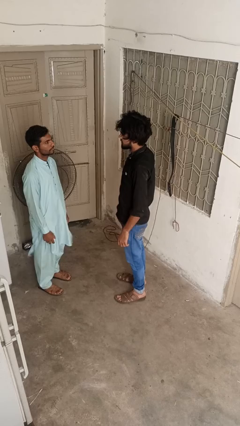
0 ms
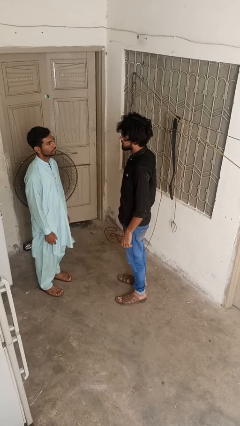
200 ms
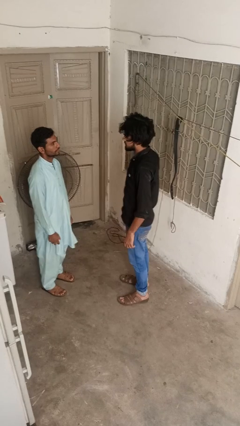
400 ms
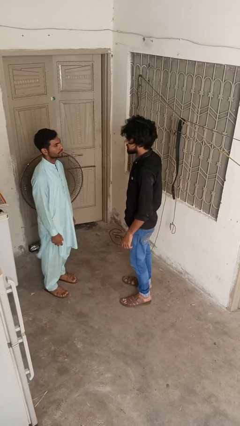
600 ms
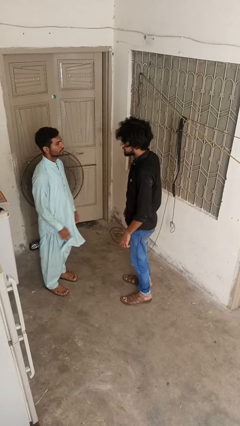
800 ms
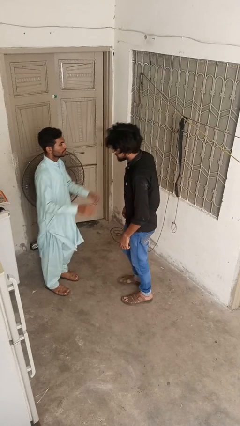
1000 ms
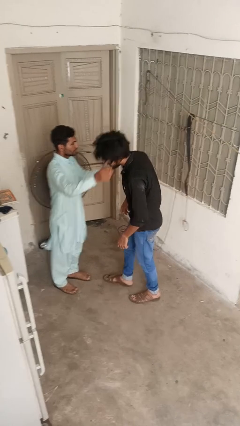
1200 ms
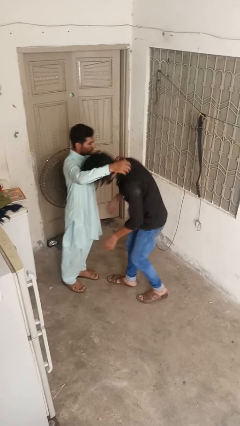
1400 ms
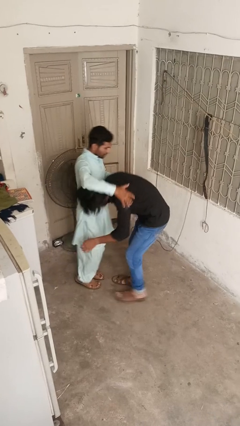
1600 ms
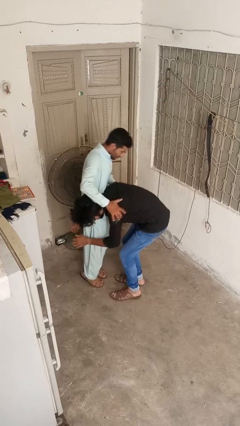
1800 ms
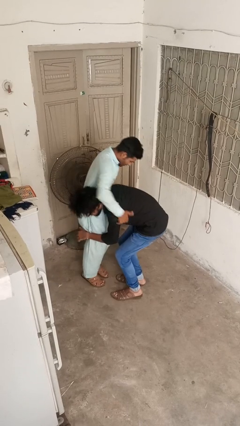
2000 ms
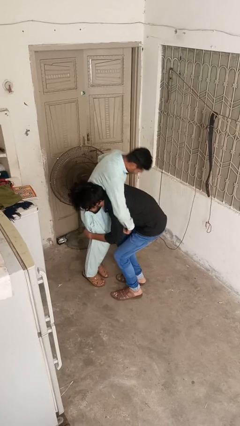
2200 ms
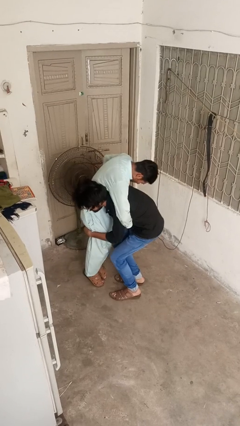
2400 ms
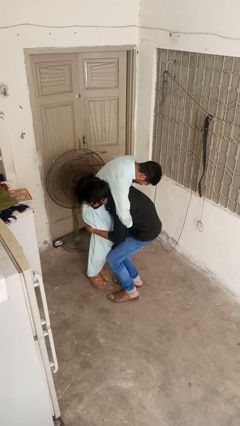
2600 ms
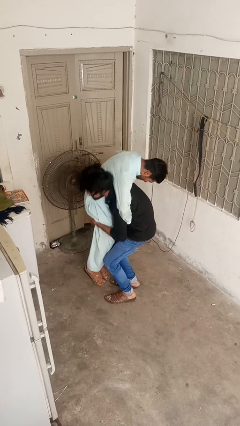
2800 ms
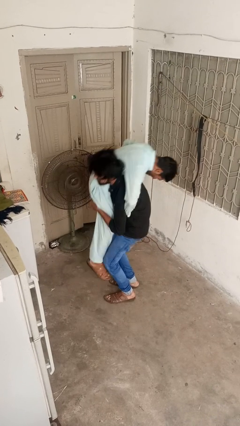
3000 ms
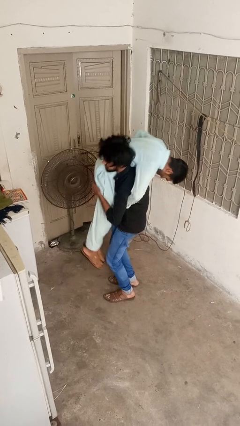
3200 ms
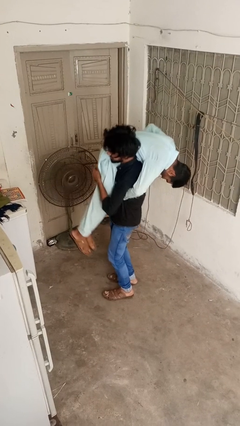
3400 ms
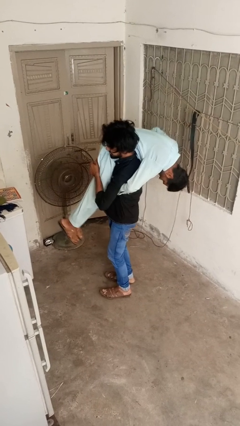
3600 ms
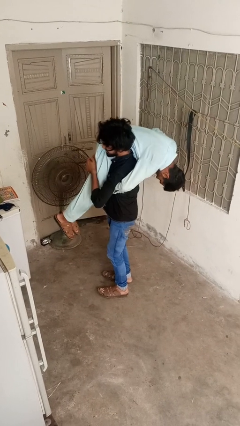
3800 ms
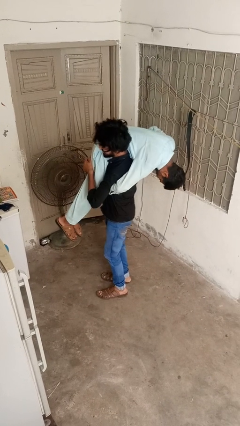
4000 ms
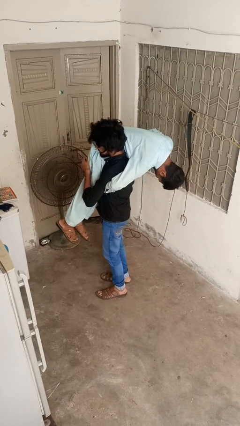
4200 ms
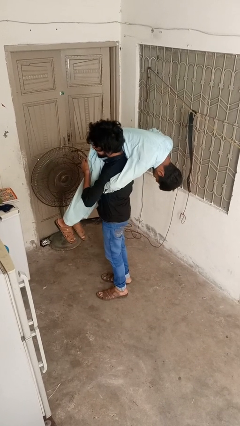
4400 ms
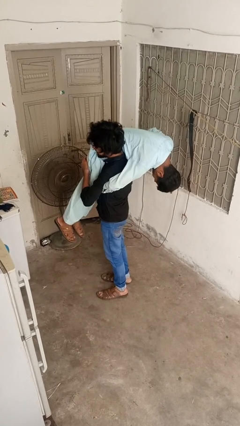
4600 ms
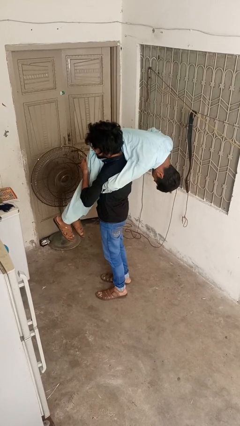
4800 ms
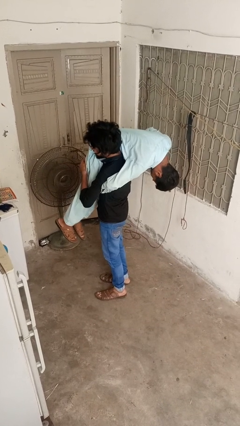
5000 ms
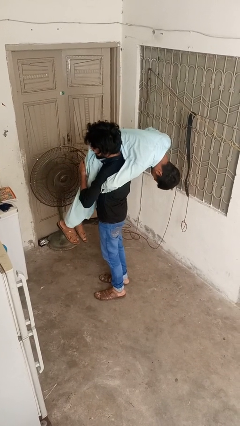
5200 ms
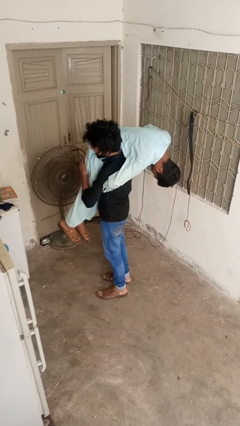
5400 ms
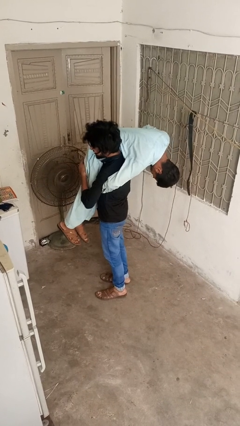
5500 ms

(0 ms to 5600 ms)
person carries person over shoulder

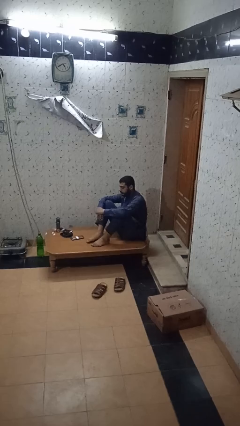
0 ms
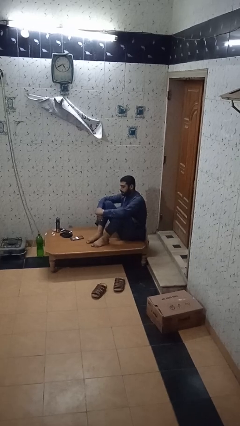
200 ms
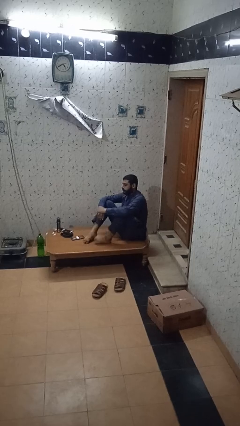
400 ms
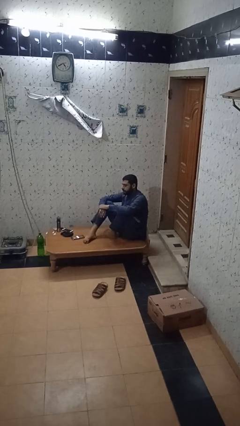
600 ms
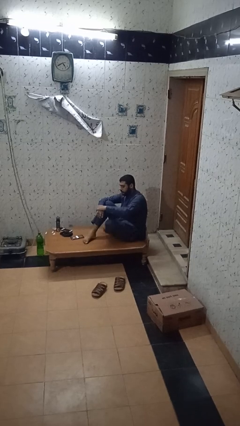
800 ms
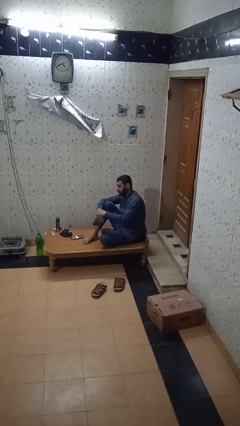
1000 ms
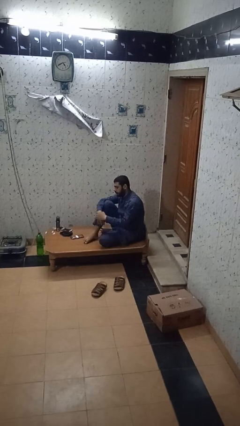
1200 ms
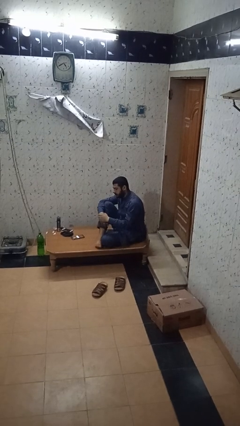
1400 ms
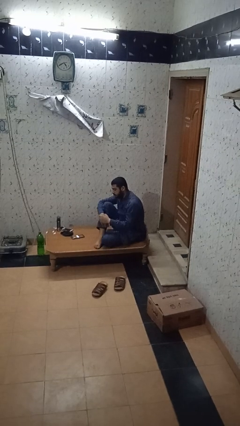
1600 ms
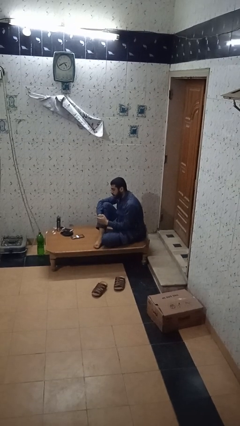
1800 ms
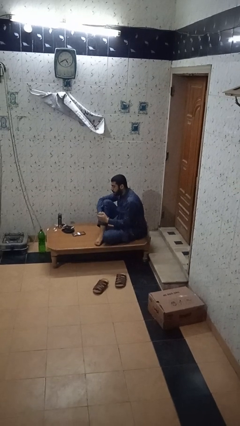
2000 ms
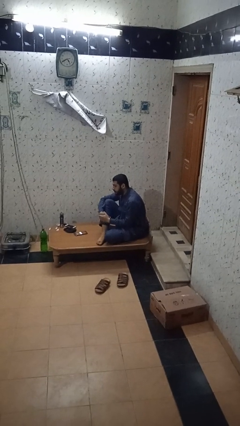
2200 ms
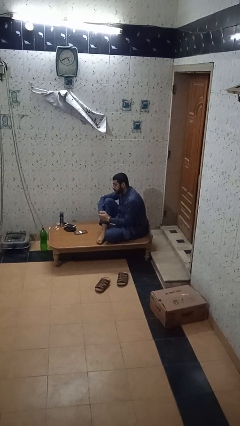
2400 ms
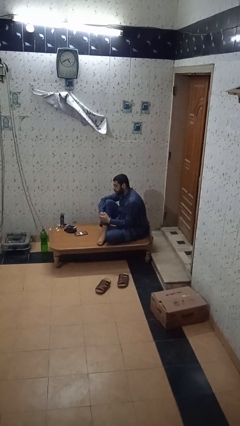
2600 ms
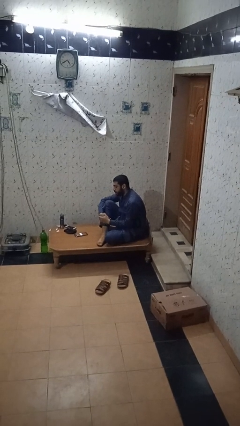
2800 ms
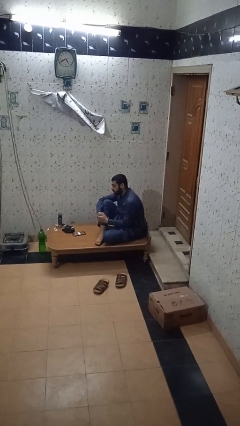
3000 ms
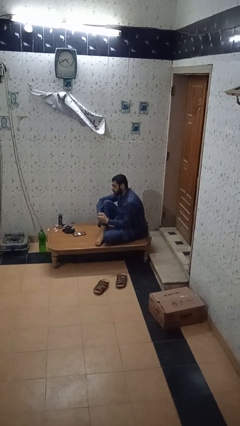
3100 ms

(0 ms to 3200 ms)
person crosses legs

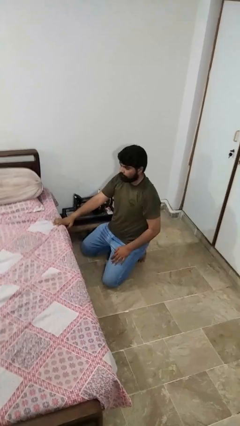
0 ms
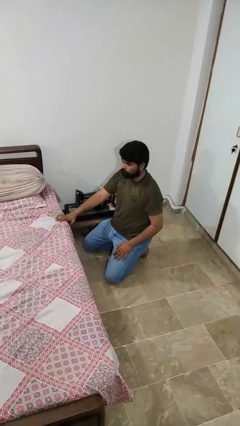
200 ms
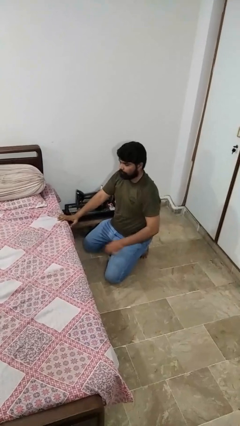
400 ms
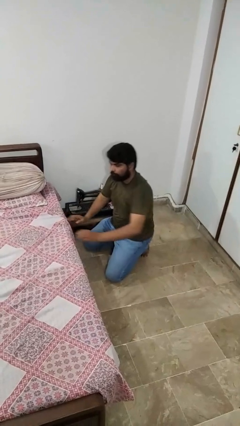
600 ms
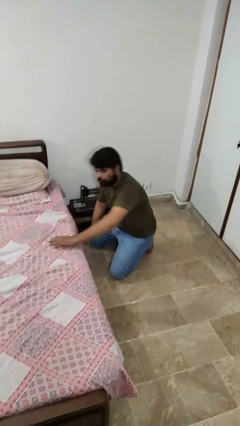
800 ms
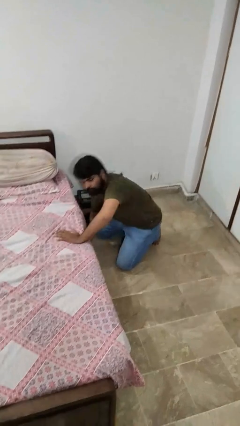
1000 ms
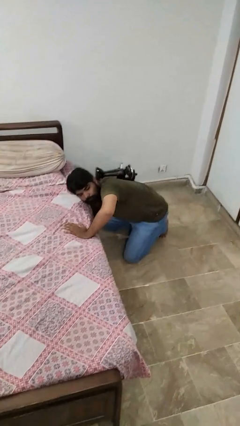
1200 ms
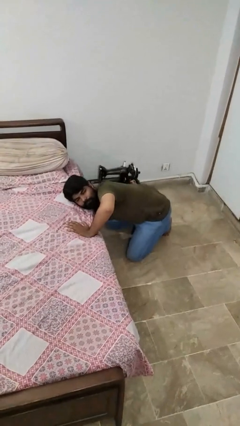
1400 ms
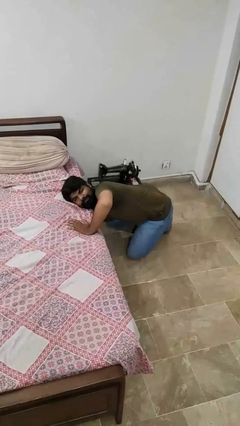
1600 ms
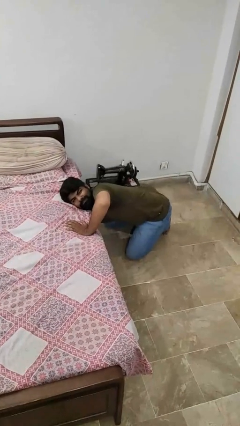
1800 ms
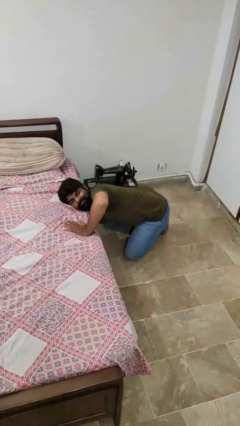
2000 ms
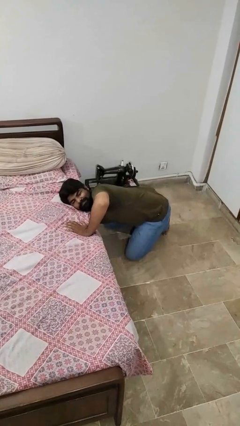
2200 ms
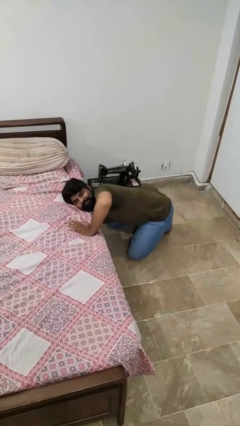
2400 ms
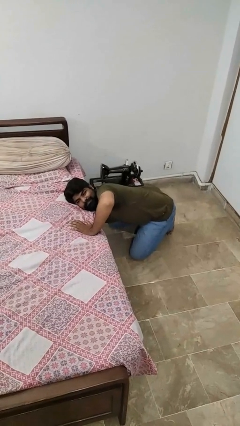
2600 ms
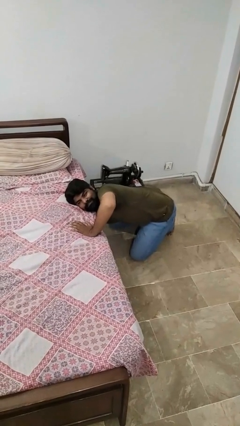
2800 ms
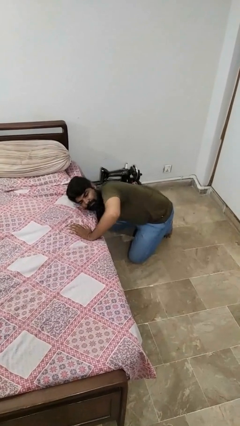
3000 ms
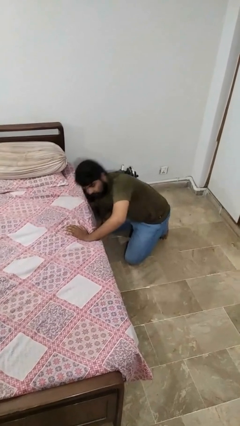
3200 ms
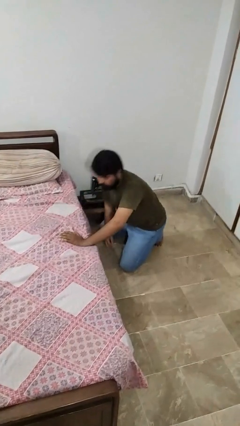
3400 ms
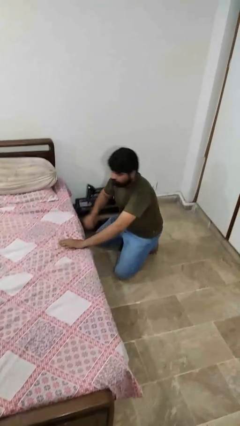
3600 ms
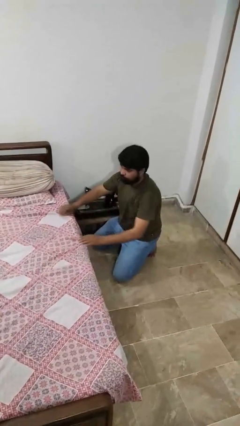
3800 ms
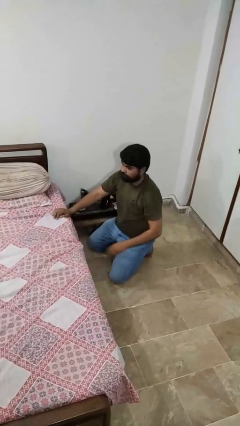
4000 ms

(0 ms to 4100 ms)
person searches under bed

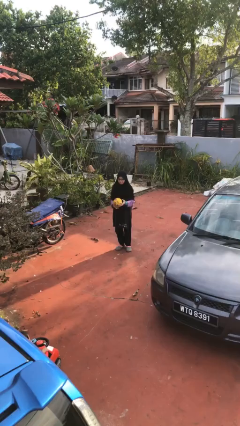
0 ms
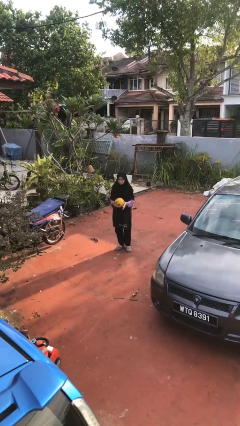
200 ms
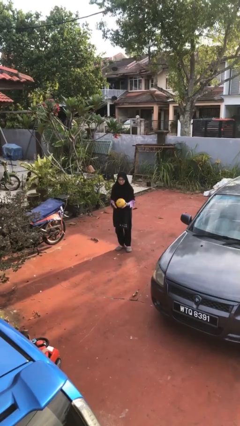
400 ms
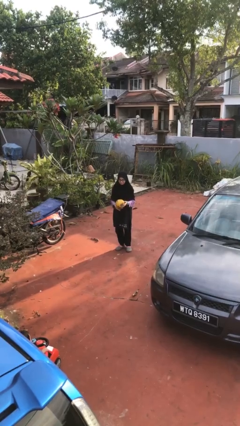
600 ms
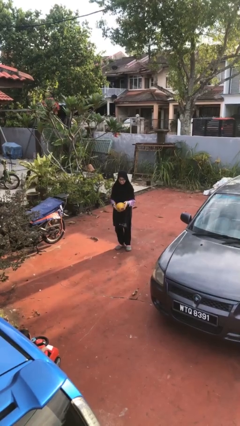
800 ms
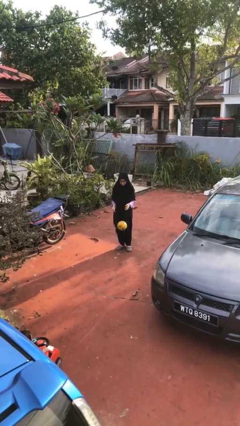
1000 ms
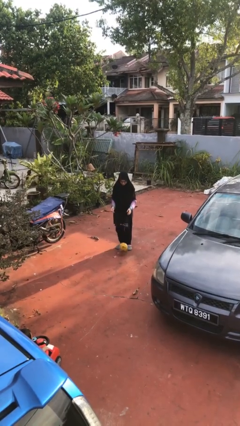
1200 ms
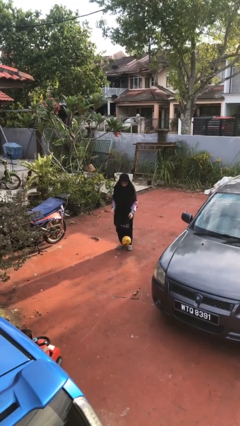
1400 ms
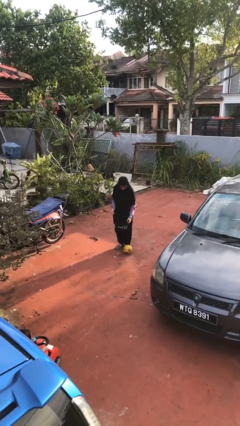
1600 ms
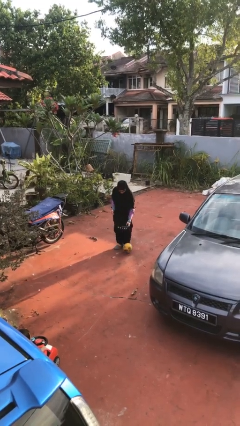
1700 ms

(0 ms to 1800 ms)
person drops object

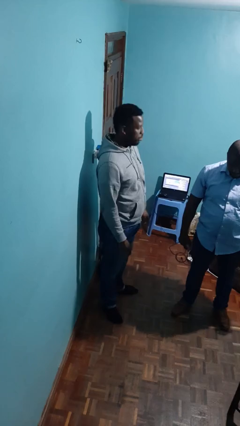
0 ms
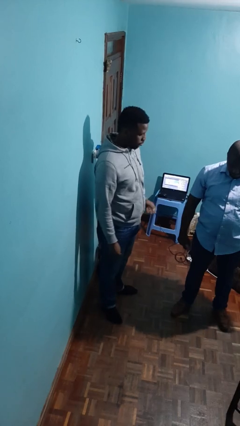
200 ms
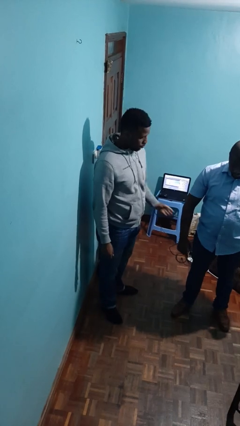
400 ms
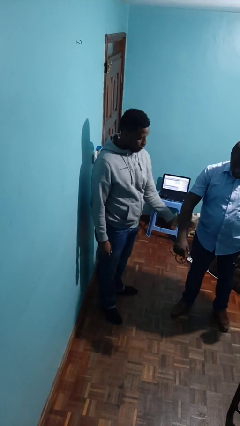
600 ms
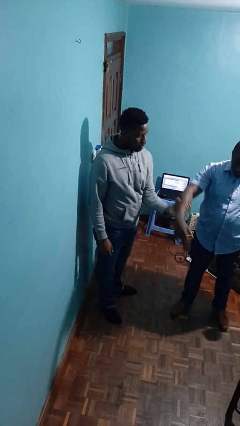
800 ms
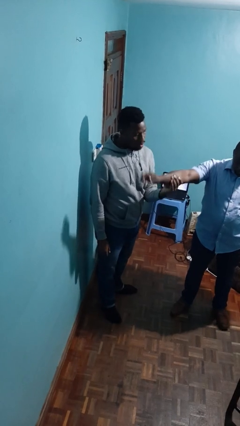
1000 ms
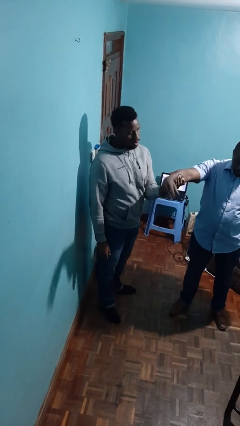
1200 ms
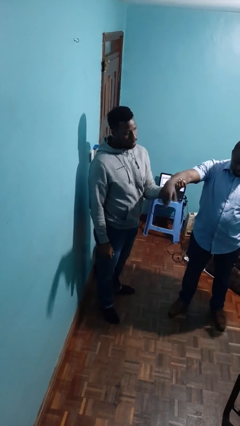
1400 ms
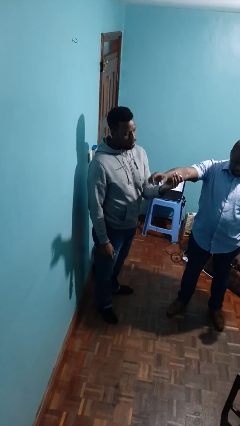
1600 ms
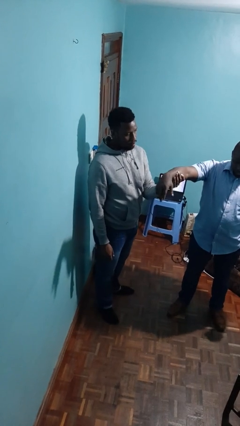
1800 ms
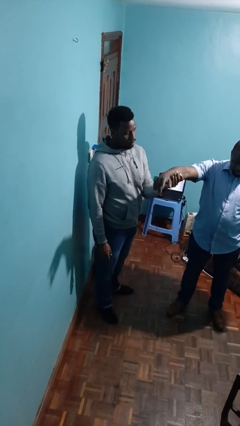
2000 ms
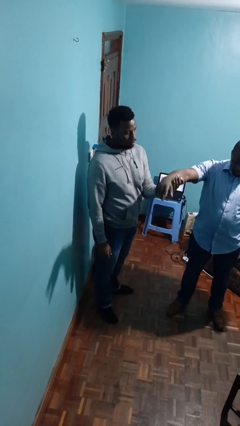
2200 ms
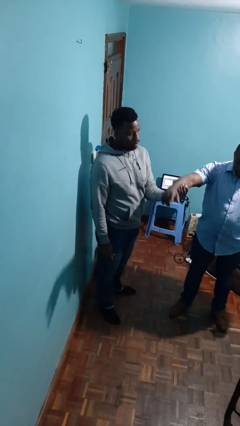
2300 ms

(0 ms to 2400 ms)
person grabs person by forearm

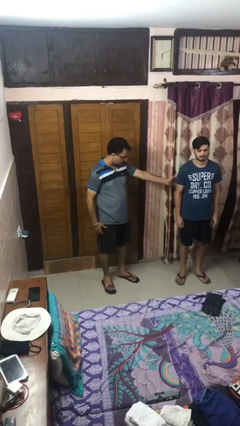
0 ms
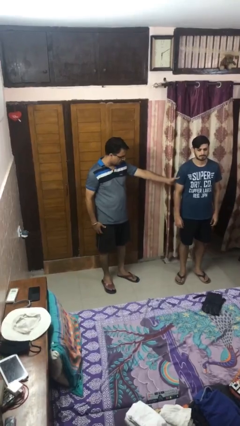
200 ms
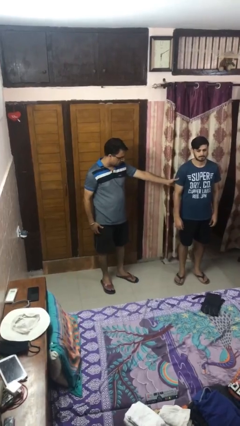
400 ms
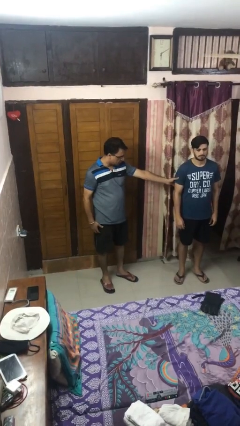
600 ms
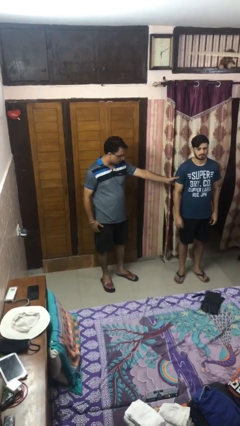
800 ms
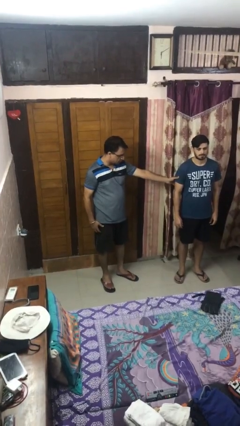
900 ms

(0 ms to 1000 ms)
person grabs person by bicep
